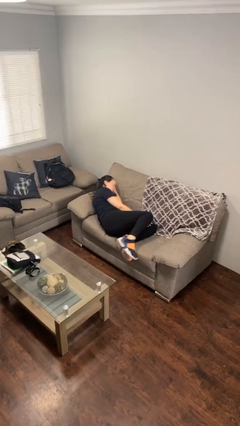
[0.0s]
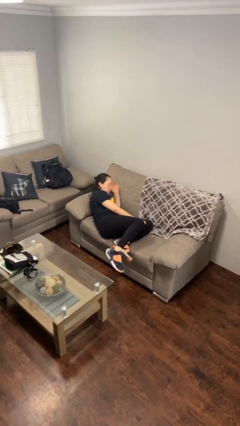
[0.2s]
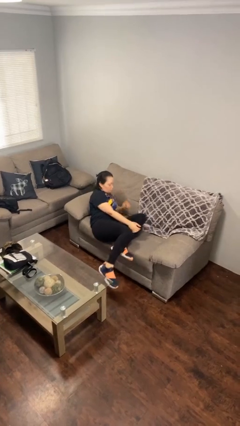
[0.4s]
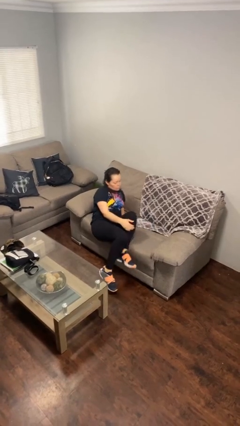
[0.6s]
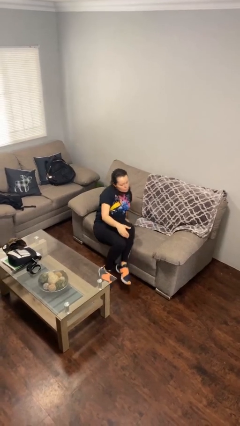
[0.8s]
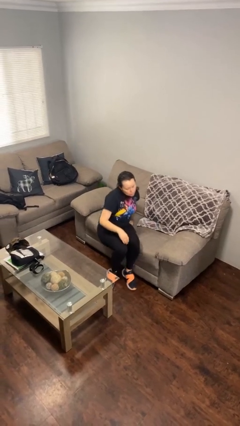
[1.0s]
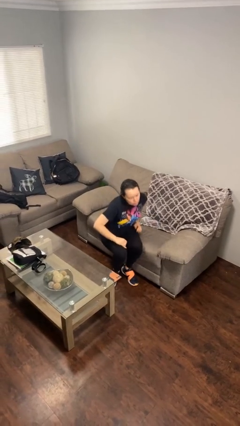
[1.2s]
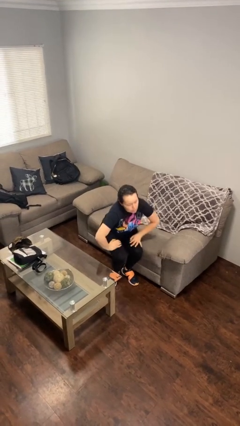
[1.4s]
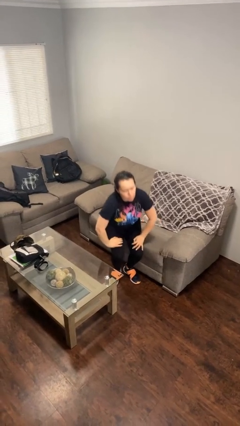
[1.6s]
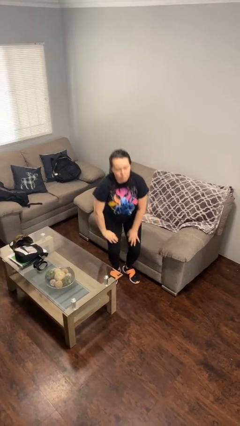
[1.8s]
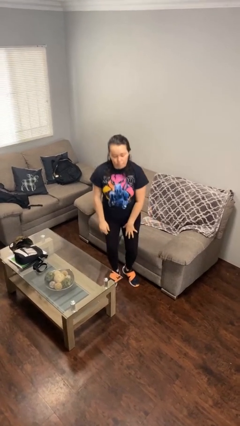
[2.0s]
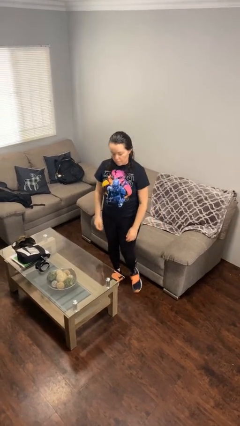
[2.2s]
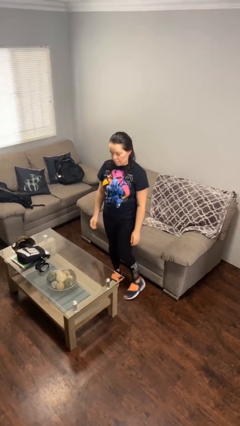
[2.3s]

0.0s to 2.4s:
person stands up

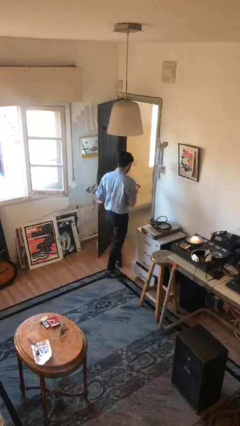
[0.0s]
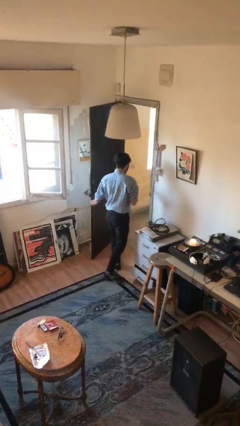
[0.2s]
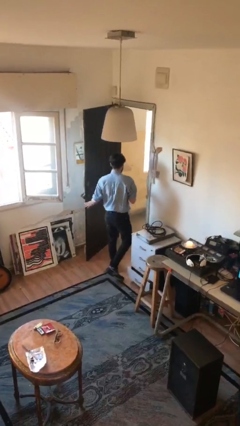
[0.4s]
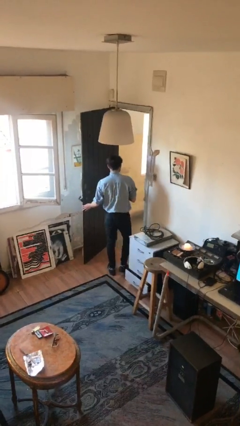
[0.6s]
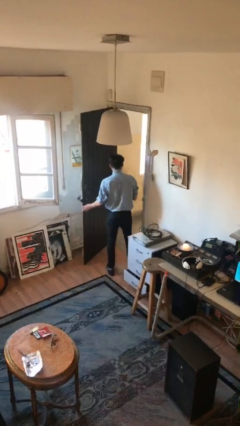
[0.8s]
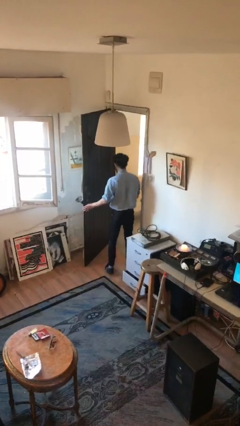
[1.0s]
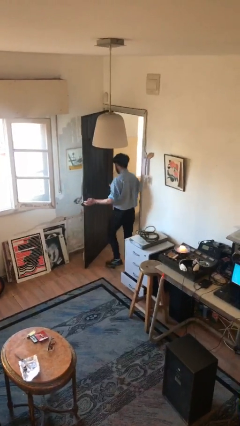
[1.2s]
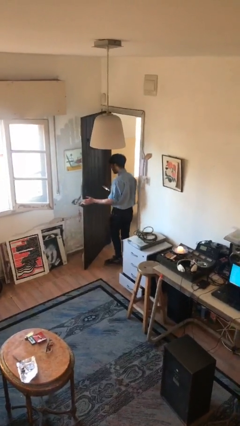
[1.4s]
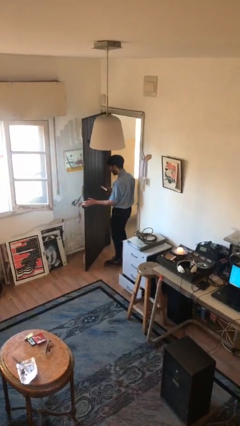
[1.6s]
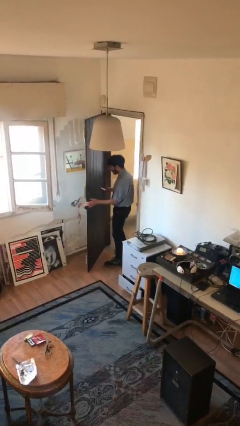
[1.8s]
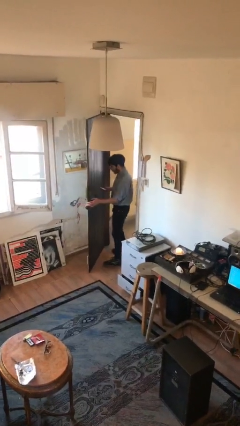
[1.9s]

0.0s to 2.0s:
person exits scene through structure

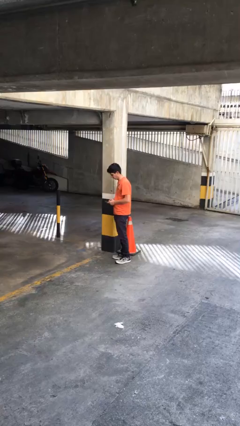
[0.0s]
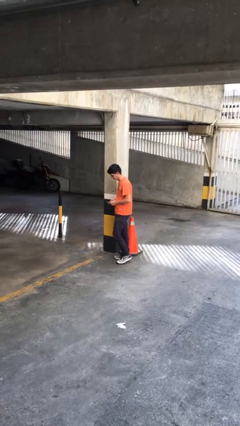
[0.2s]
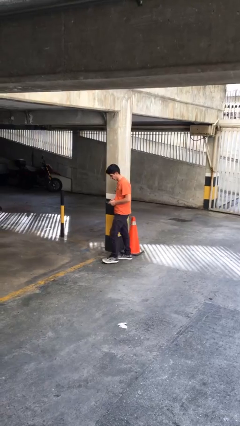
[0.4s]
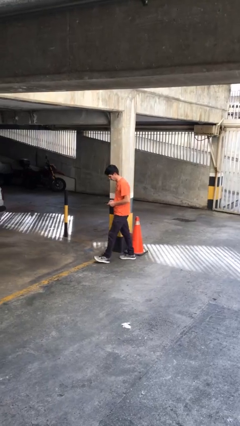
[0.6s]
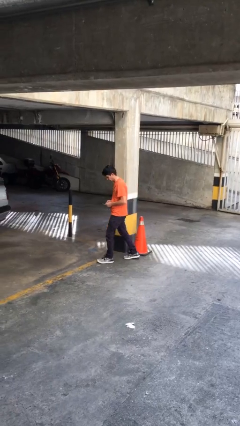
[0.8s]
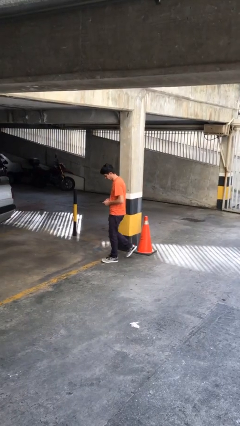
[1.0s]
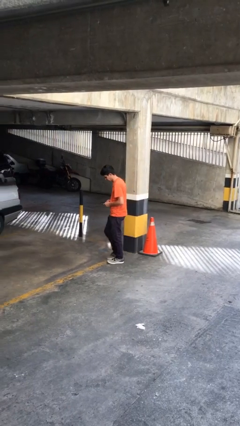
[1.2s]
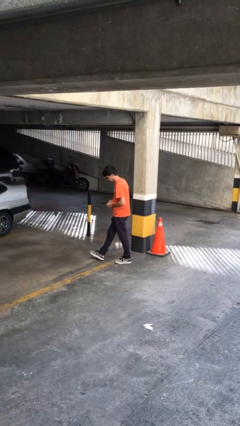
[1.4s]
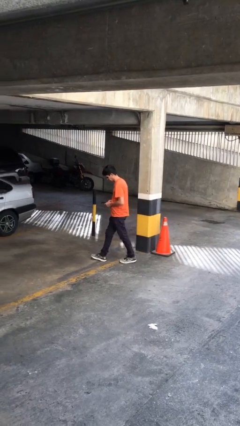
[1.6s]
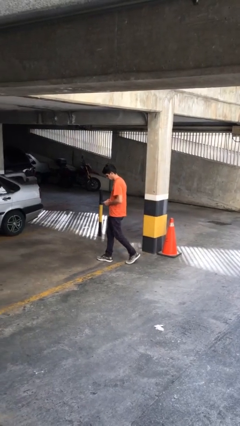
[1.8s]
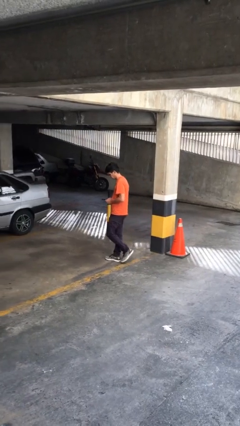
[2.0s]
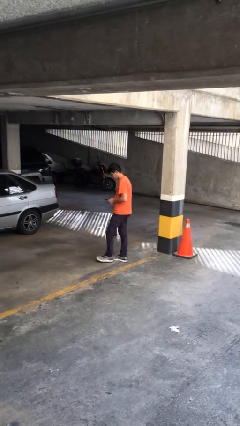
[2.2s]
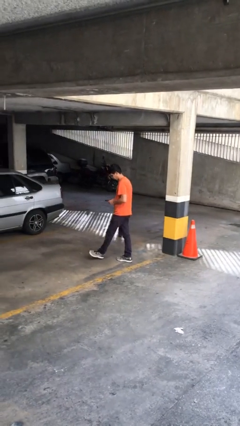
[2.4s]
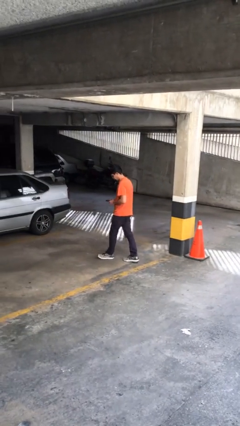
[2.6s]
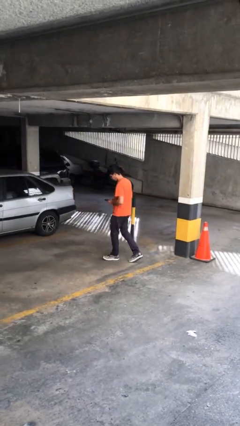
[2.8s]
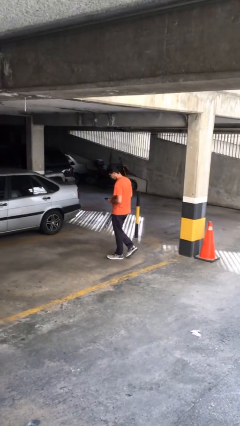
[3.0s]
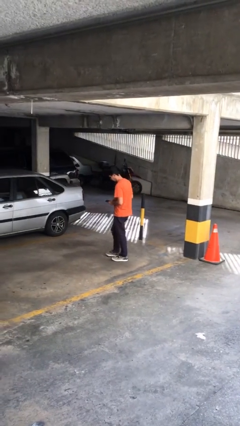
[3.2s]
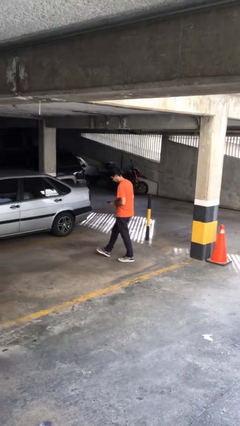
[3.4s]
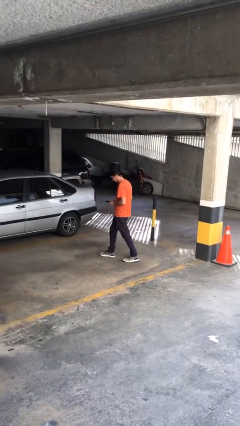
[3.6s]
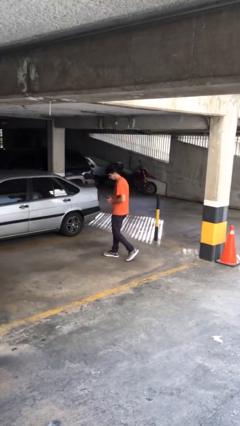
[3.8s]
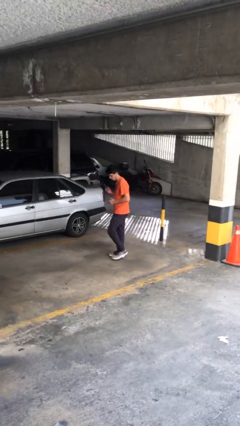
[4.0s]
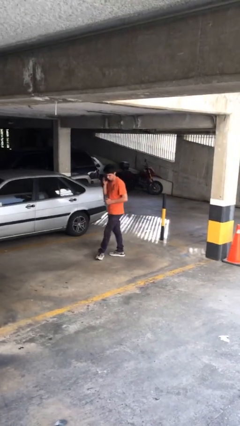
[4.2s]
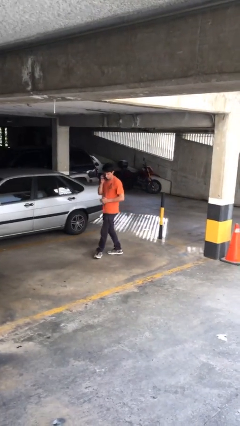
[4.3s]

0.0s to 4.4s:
person texts on phone

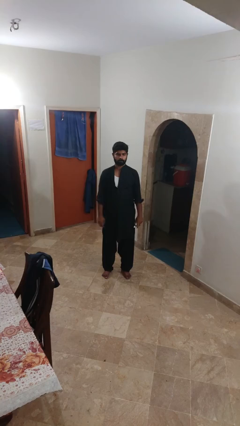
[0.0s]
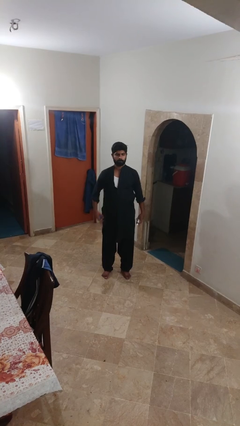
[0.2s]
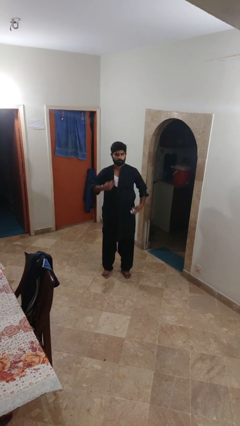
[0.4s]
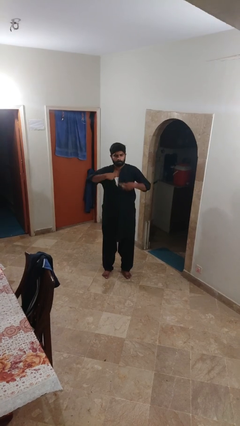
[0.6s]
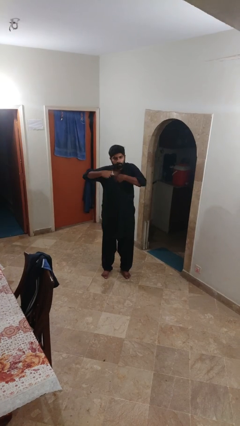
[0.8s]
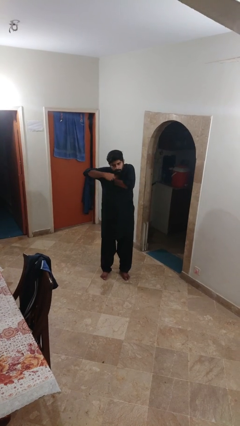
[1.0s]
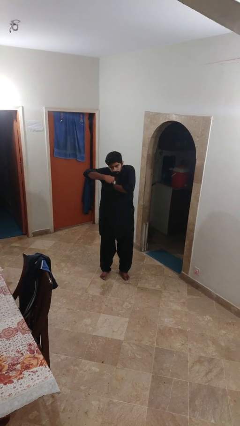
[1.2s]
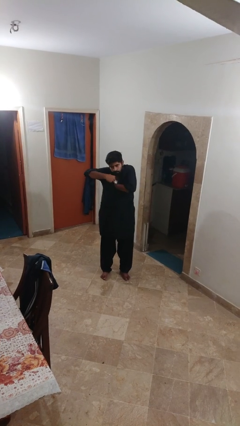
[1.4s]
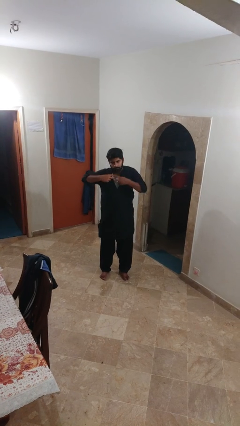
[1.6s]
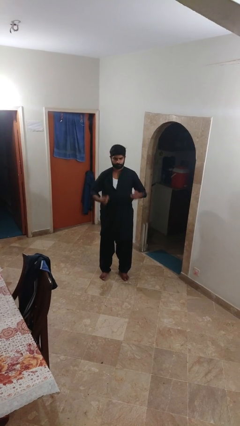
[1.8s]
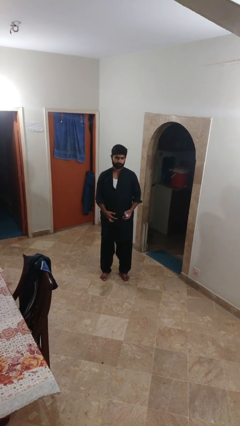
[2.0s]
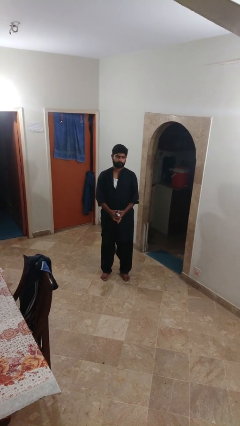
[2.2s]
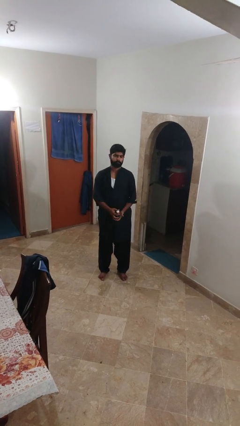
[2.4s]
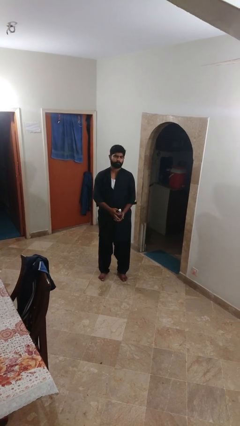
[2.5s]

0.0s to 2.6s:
person applies deodorant

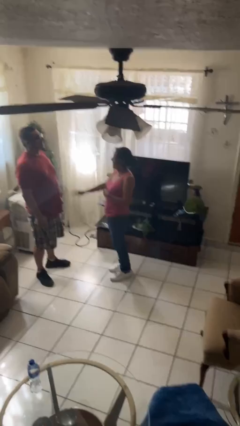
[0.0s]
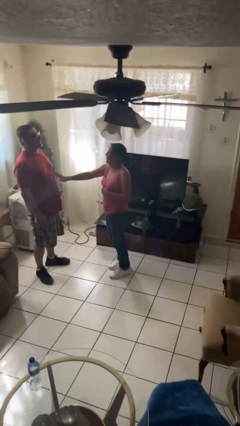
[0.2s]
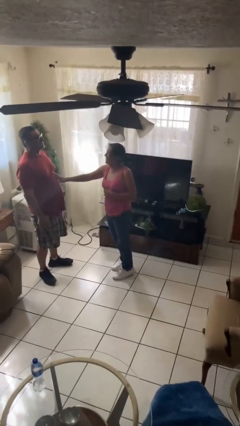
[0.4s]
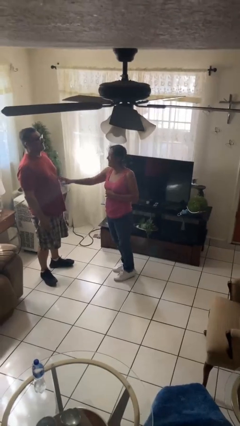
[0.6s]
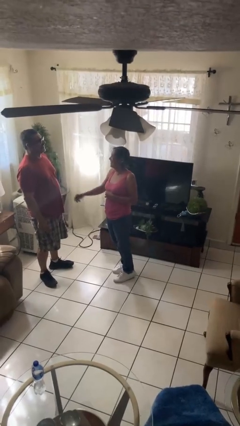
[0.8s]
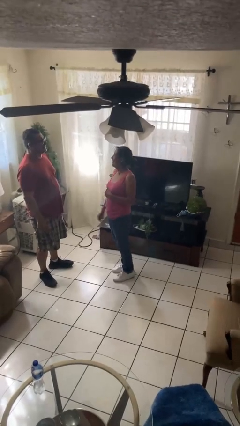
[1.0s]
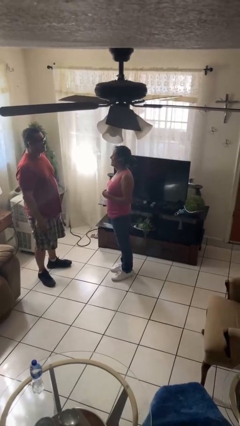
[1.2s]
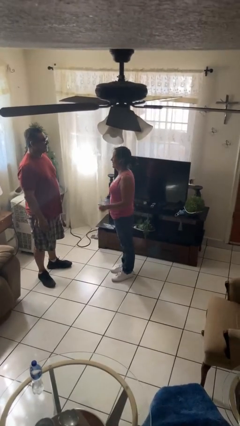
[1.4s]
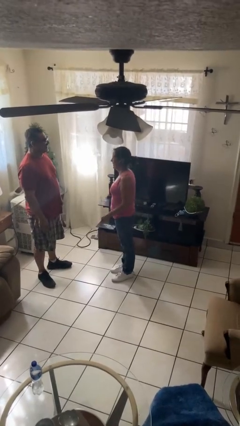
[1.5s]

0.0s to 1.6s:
person laughs with person

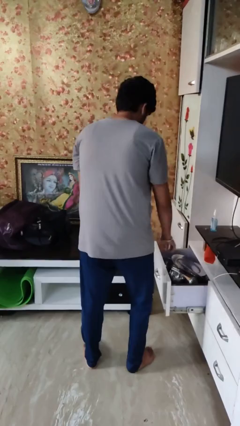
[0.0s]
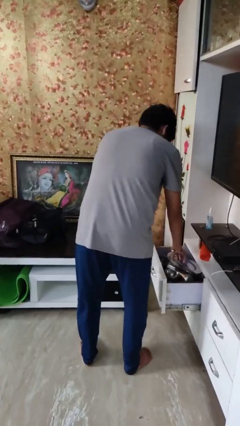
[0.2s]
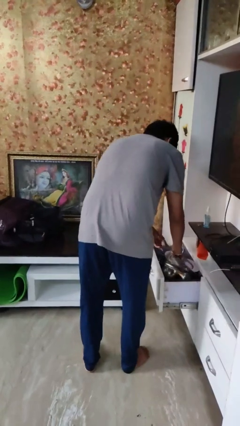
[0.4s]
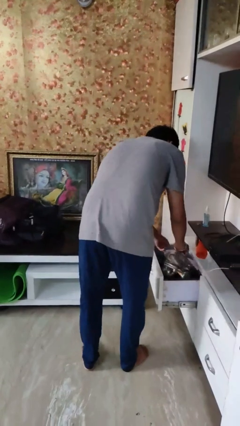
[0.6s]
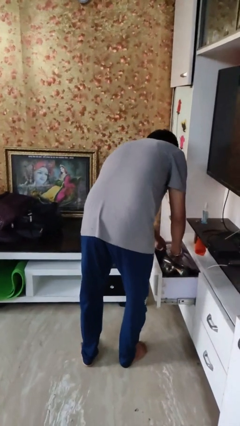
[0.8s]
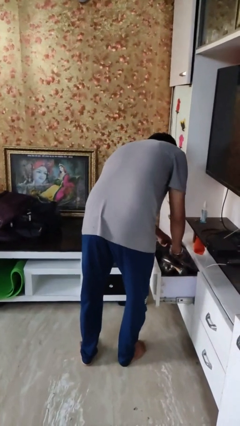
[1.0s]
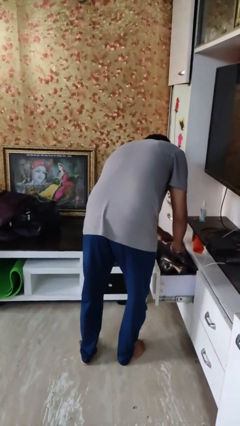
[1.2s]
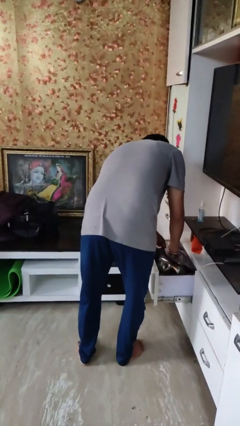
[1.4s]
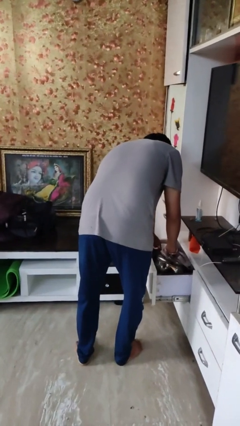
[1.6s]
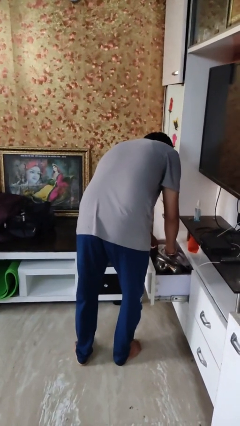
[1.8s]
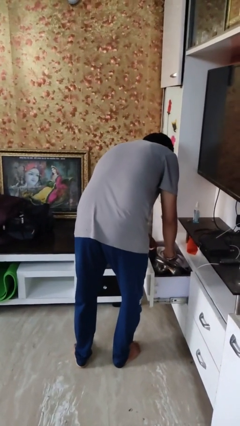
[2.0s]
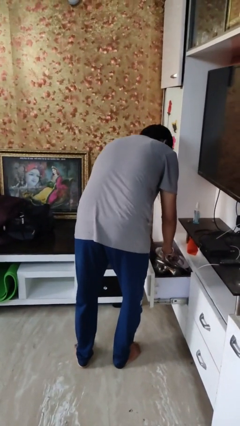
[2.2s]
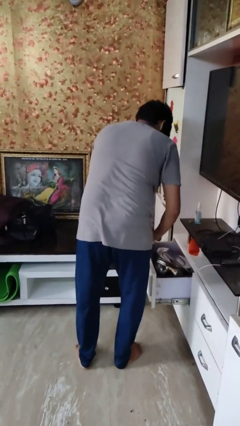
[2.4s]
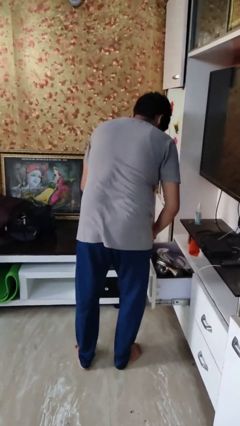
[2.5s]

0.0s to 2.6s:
person searches in kitchen drawer

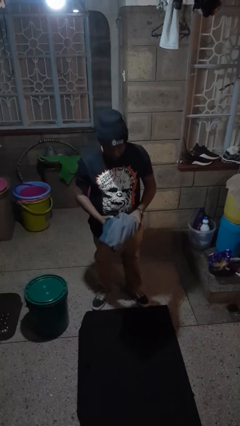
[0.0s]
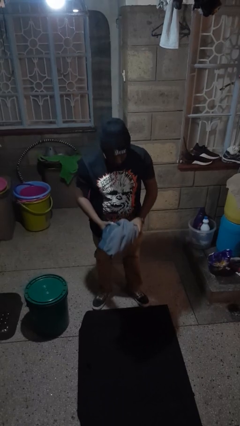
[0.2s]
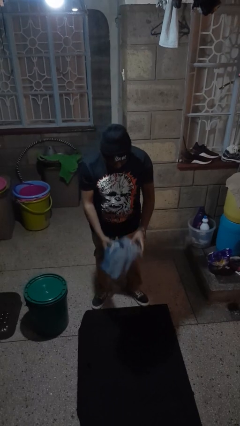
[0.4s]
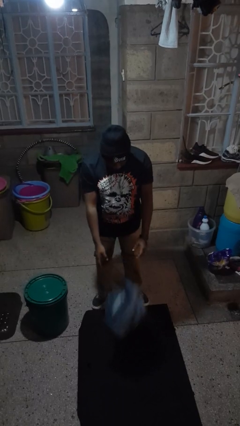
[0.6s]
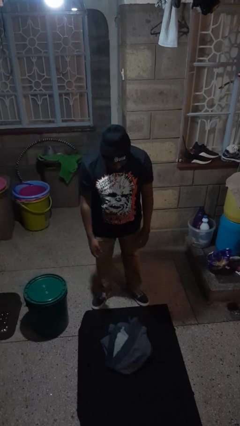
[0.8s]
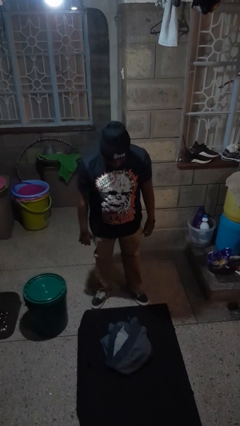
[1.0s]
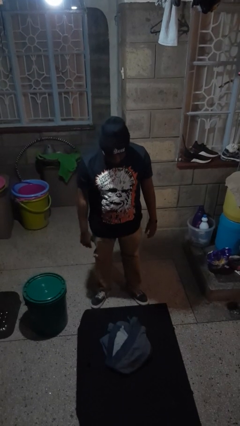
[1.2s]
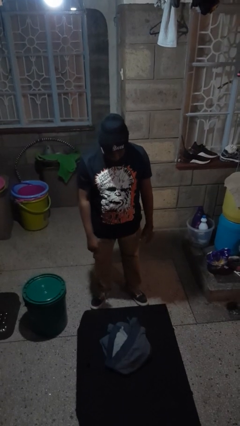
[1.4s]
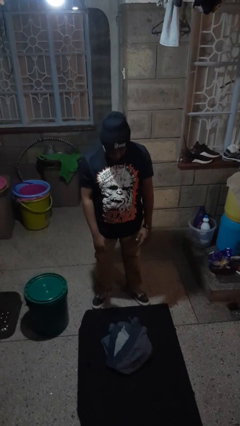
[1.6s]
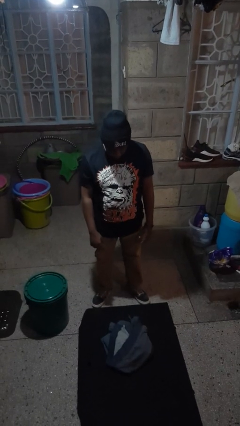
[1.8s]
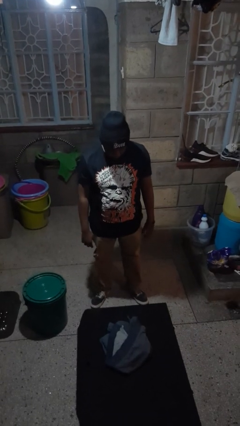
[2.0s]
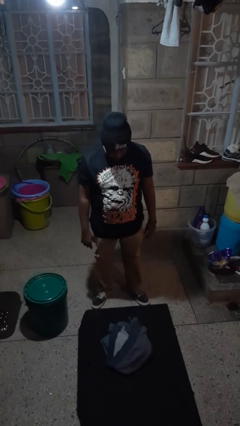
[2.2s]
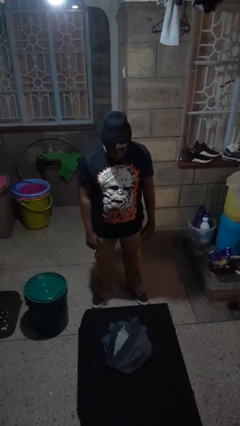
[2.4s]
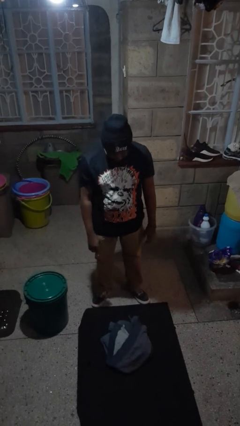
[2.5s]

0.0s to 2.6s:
person drops object
